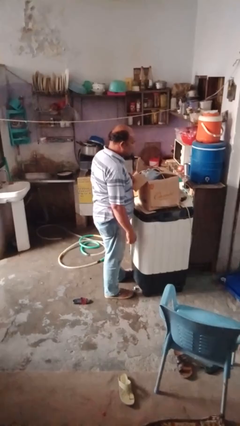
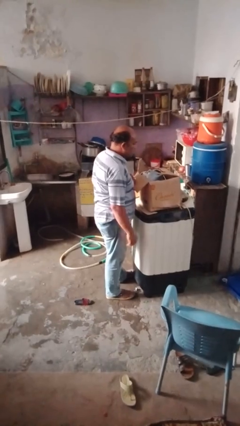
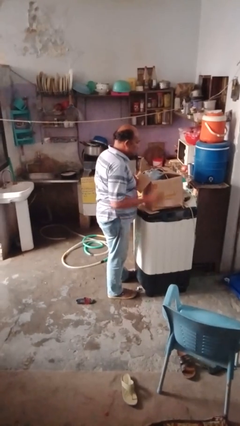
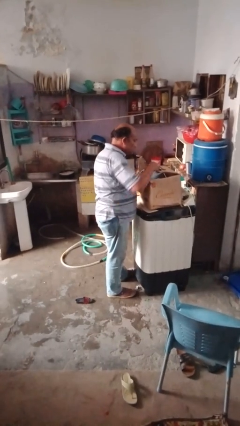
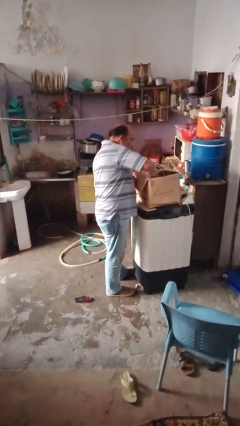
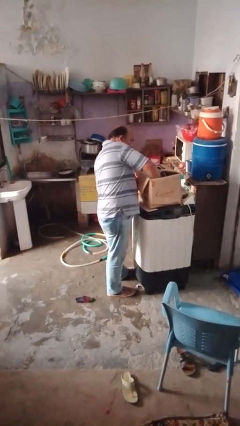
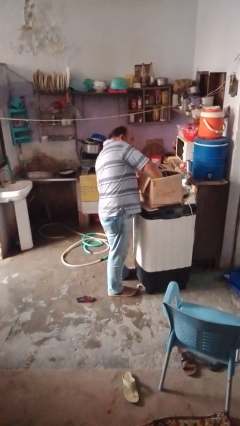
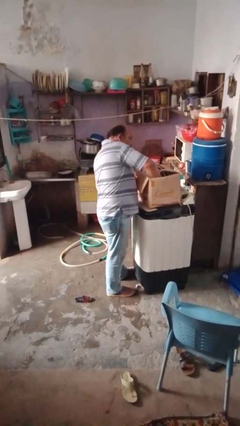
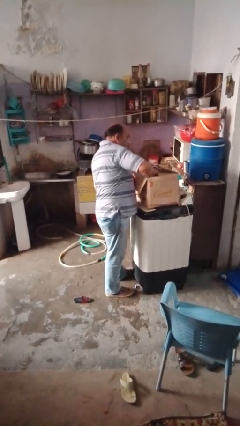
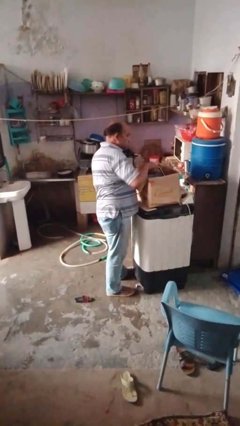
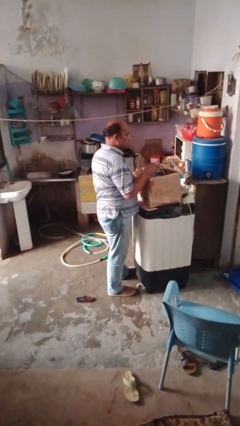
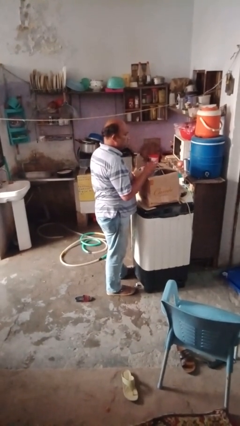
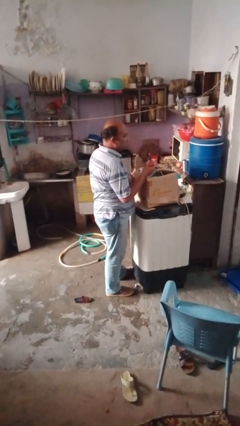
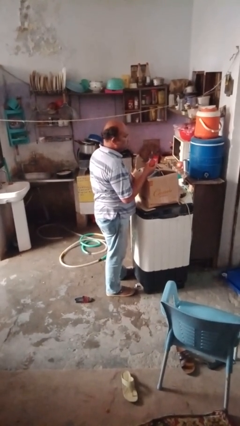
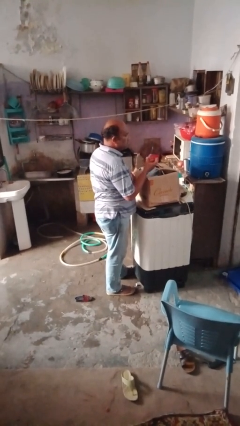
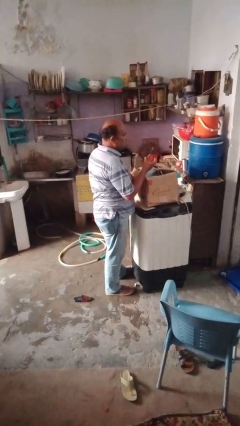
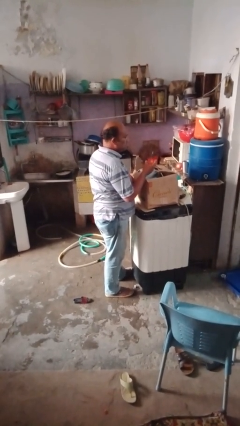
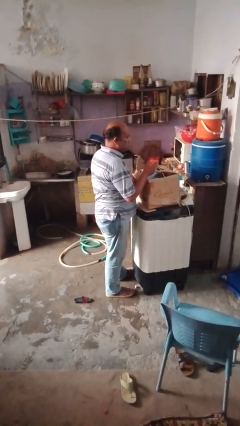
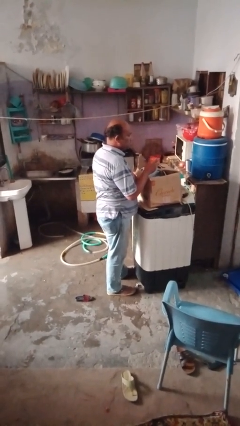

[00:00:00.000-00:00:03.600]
person takes object from box

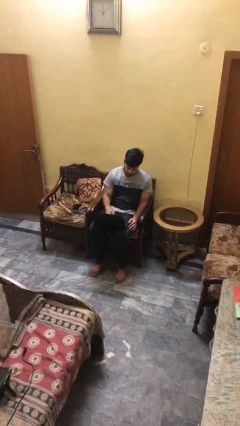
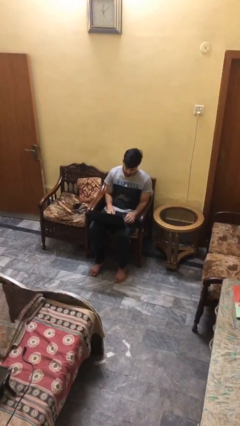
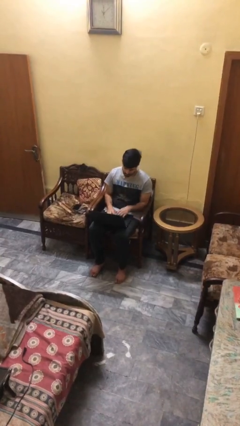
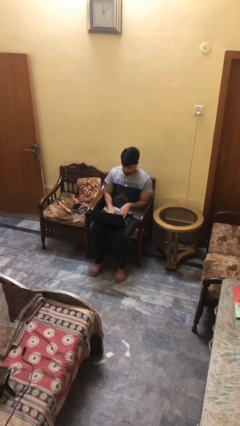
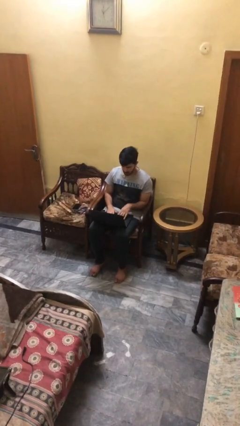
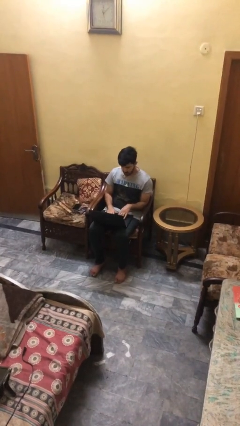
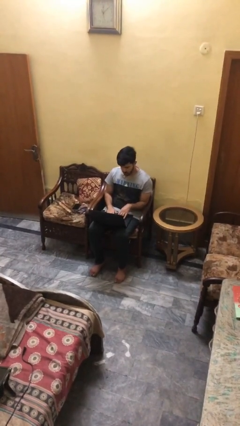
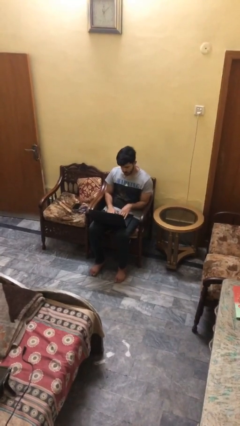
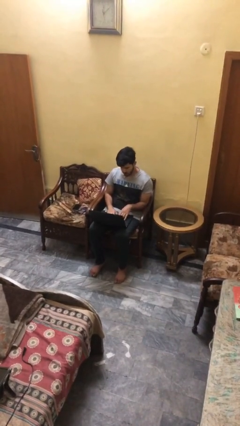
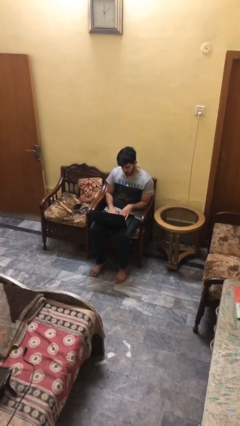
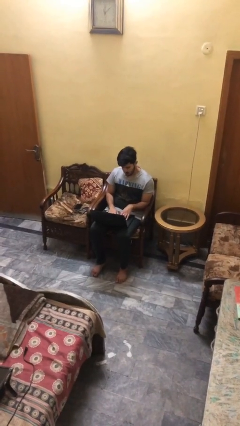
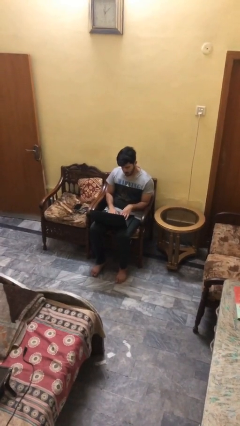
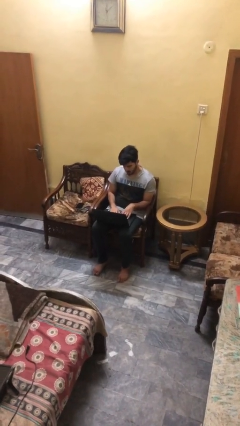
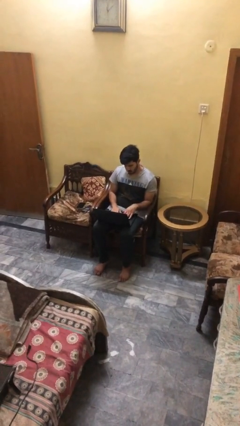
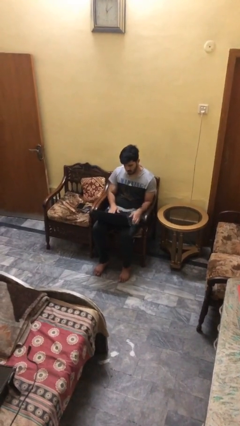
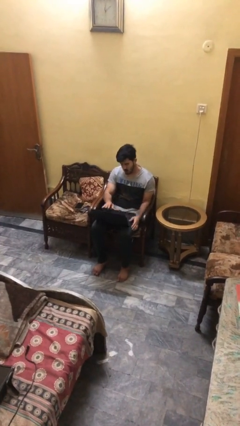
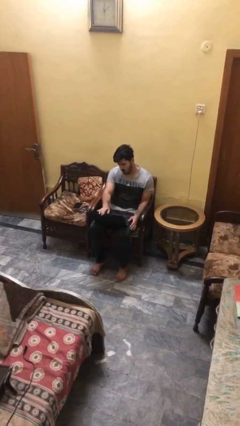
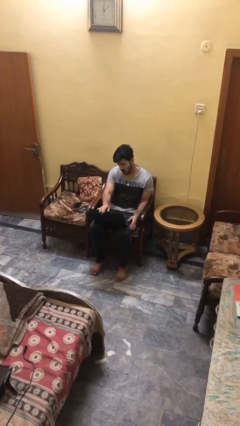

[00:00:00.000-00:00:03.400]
person interacts with laptop

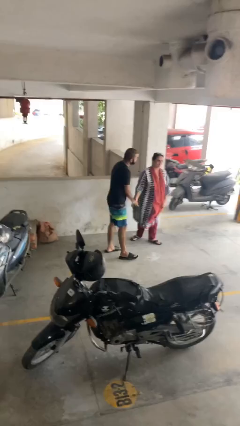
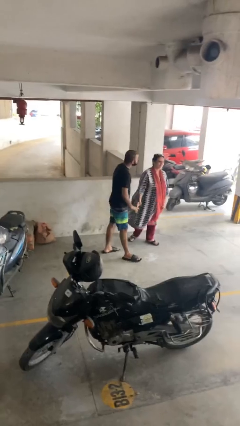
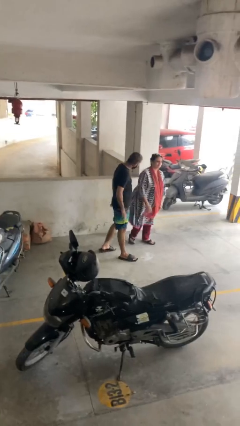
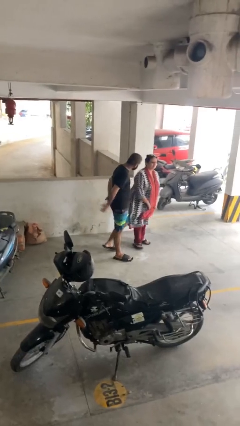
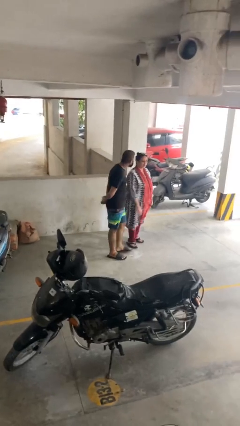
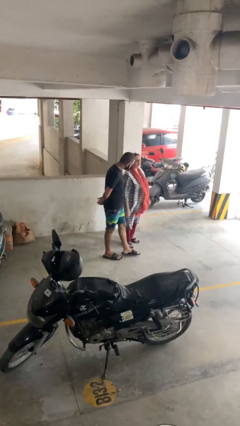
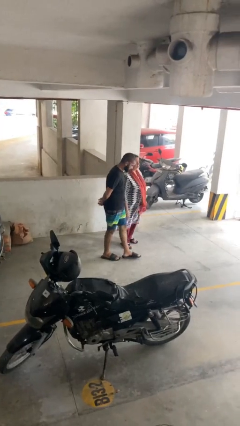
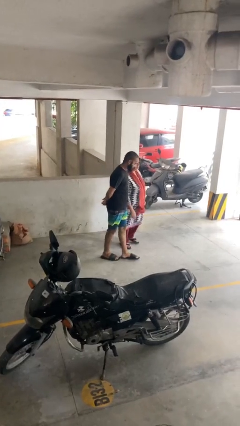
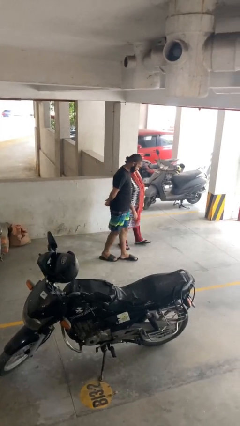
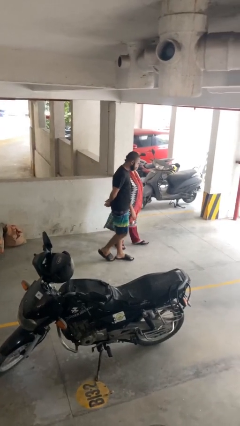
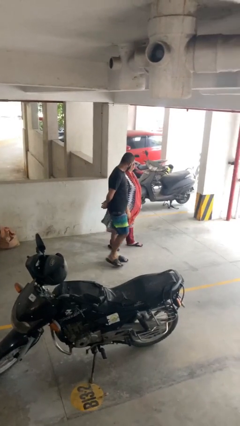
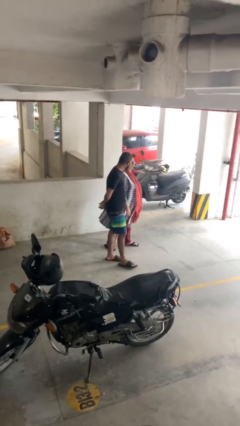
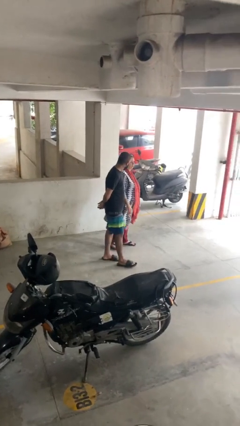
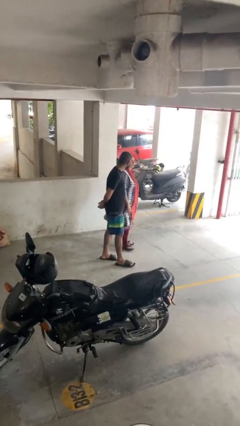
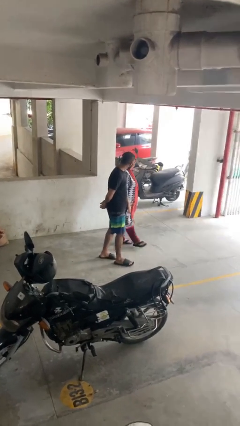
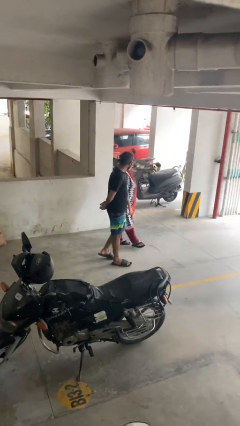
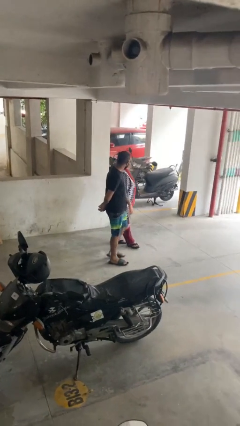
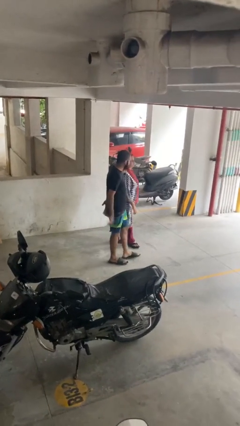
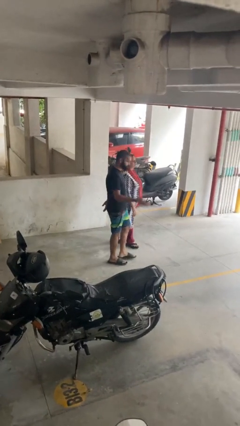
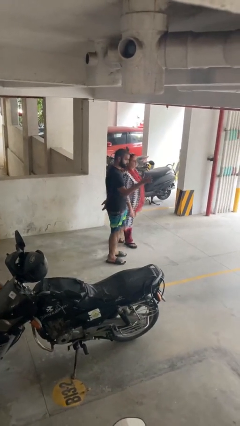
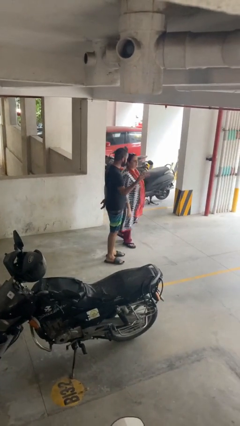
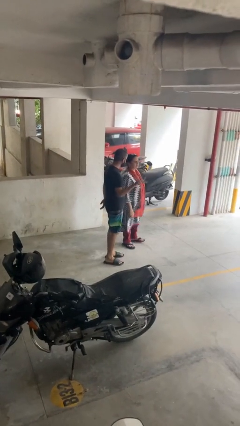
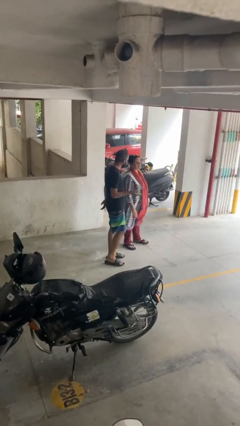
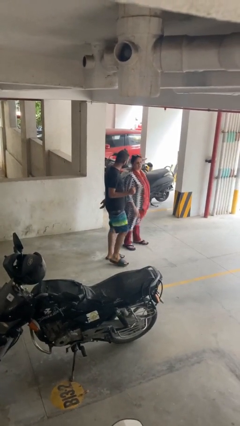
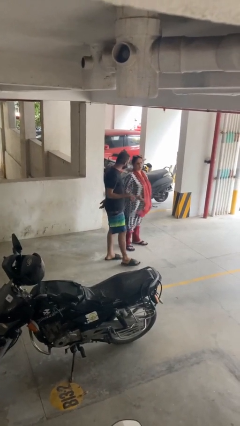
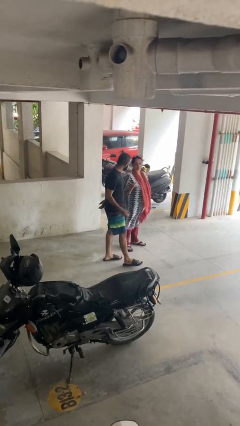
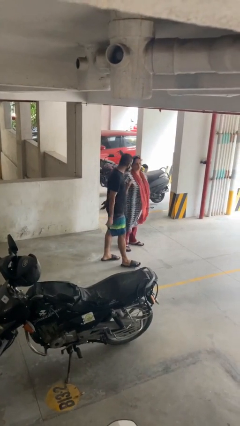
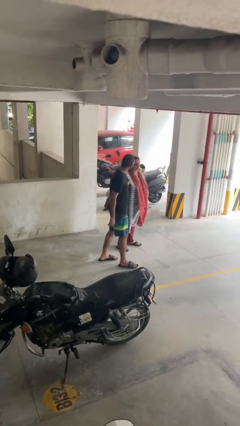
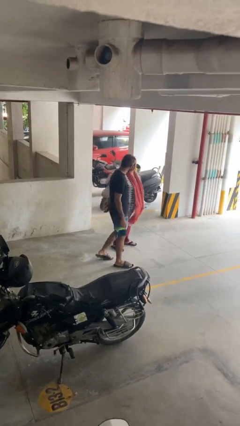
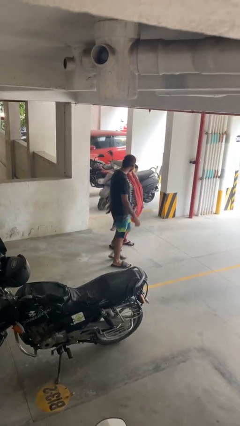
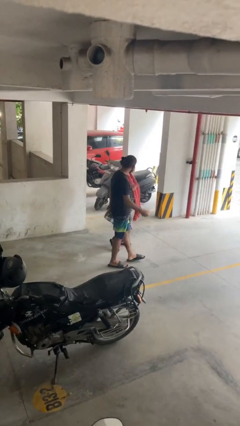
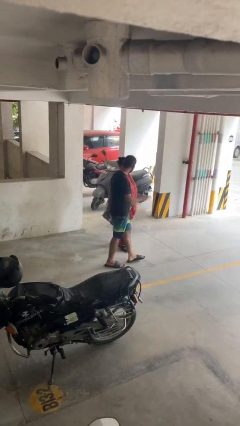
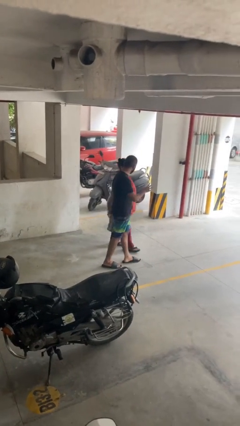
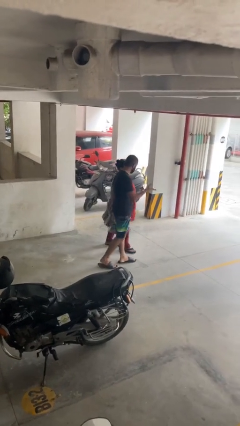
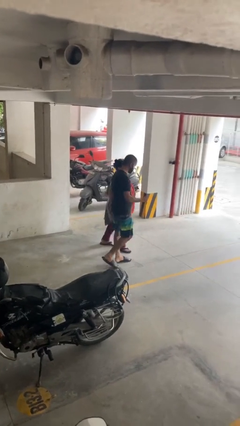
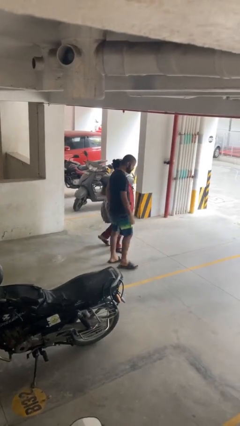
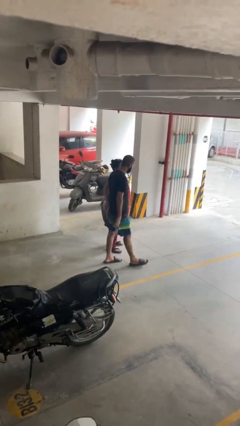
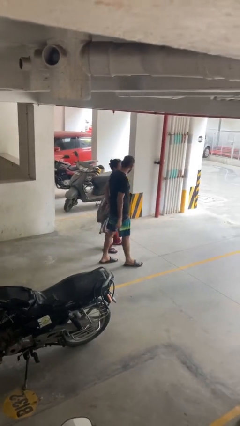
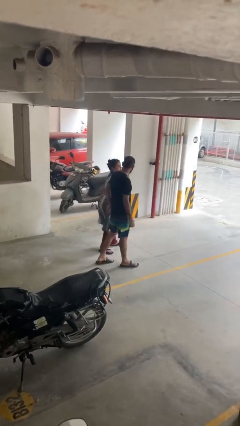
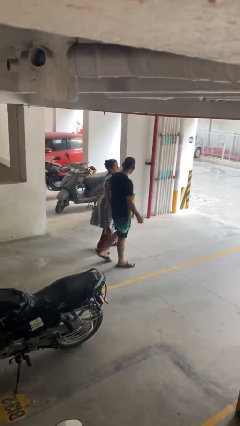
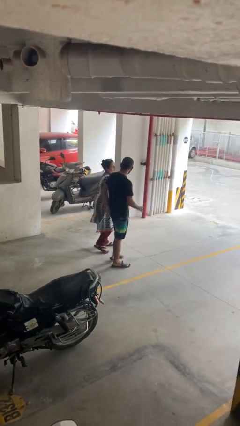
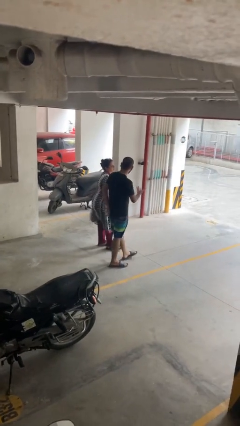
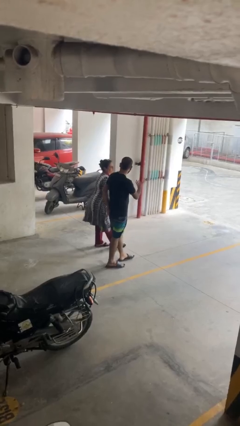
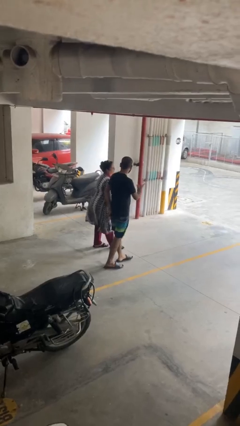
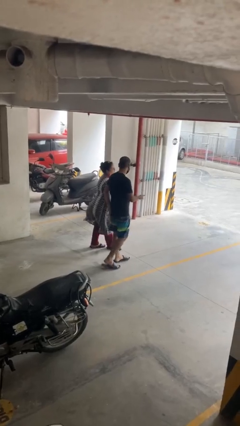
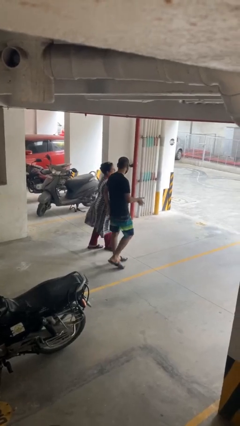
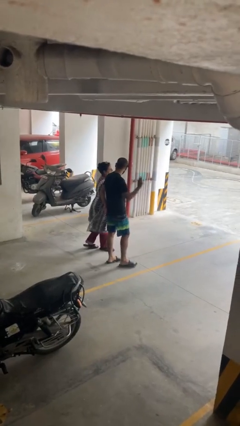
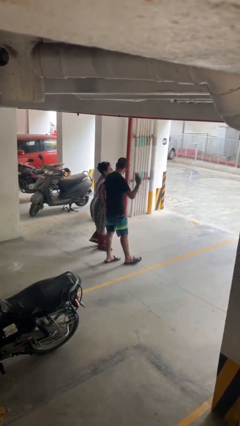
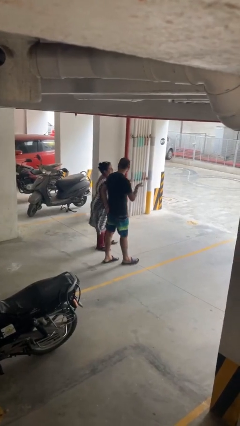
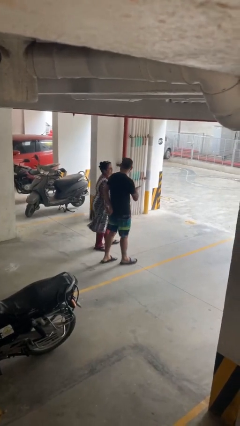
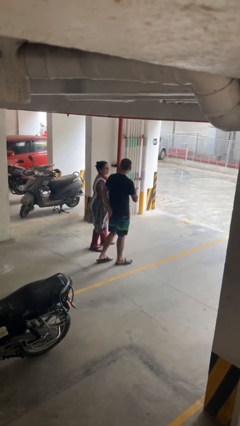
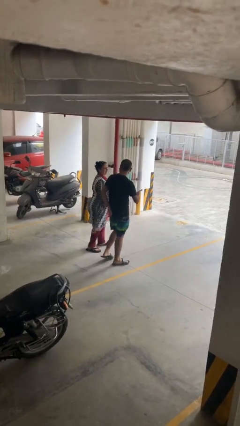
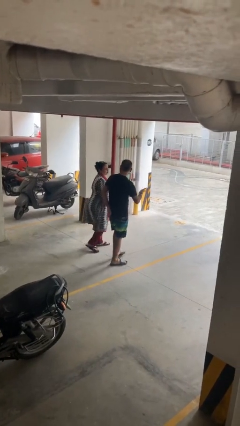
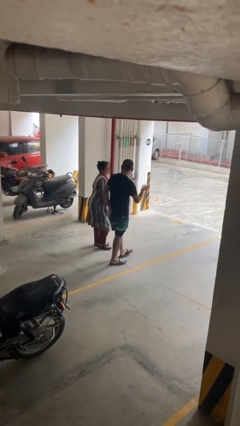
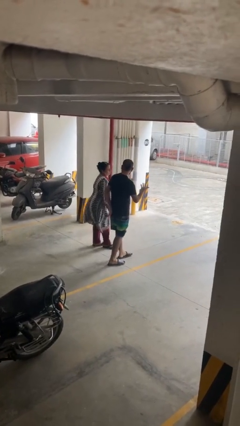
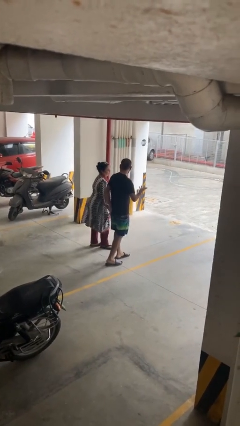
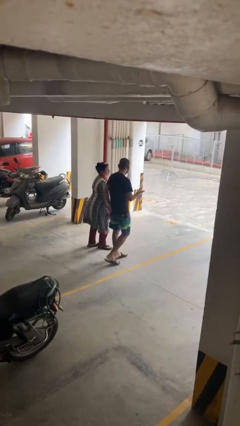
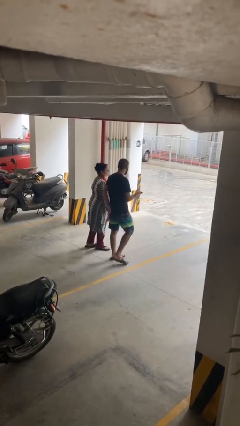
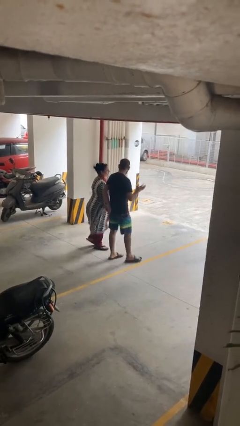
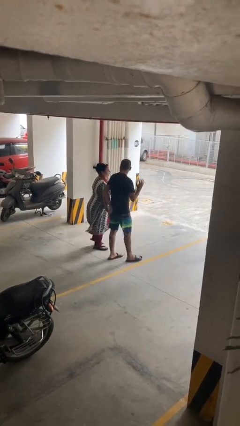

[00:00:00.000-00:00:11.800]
person talks to person
